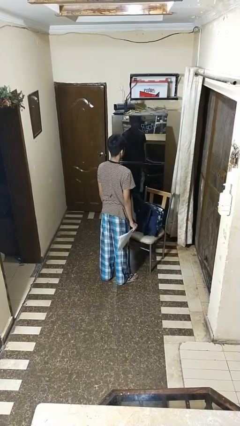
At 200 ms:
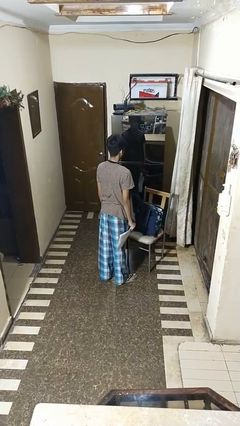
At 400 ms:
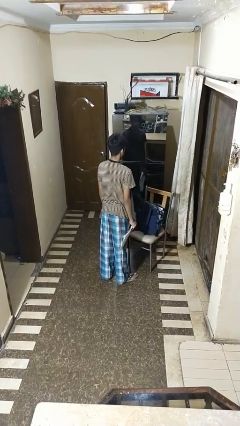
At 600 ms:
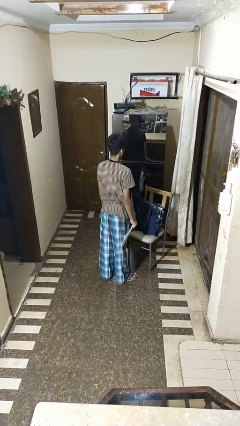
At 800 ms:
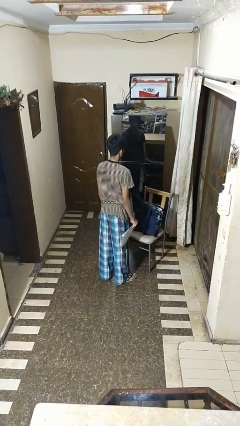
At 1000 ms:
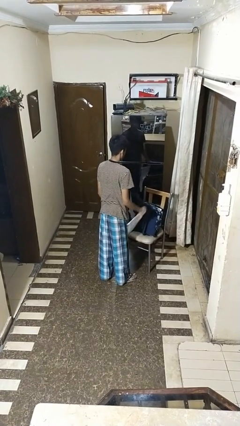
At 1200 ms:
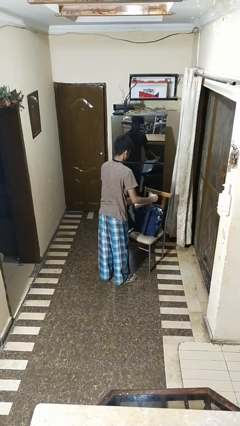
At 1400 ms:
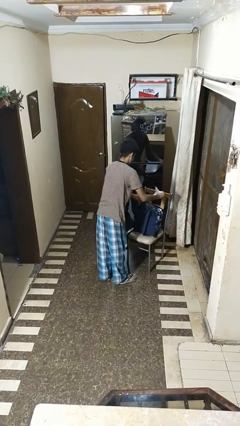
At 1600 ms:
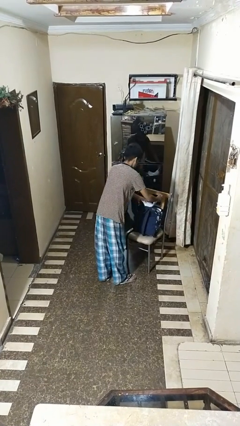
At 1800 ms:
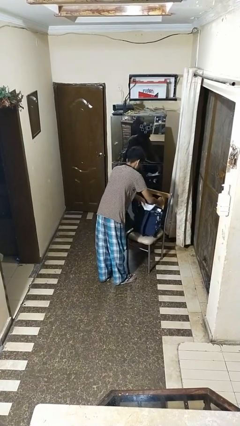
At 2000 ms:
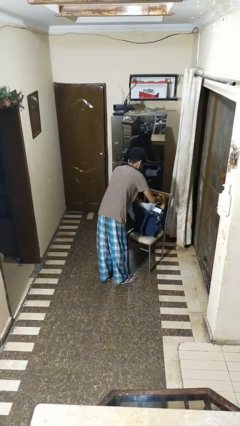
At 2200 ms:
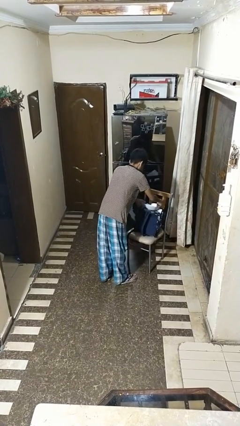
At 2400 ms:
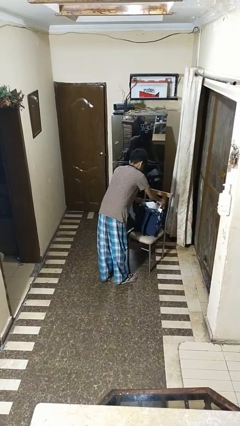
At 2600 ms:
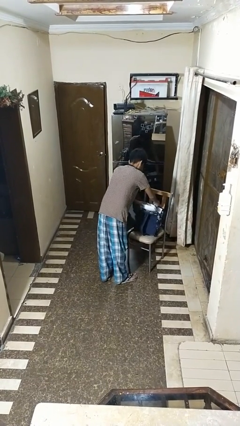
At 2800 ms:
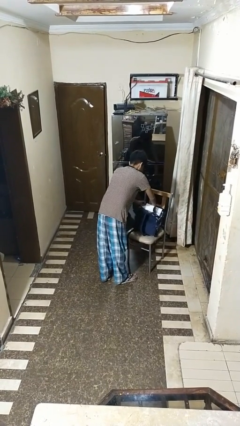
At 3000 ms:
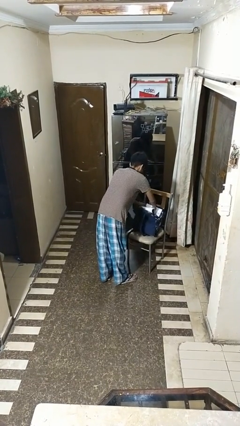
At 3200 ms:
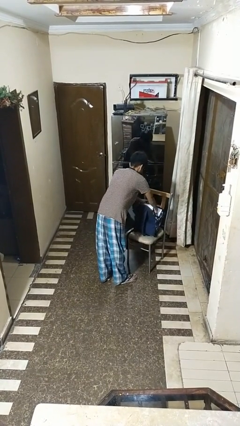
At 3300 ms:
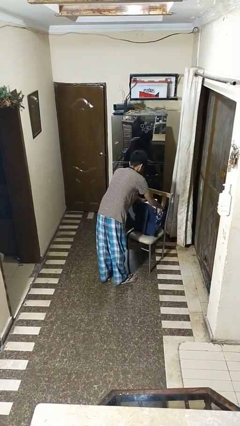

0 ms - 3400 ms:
person puts object into bag

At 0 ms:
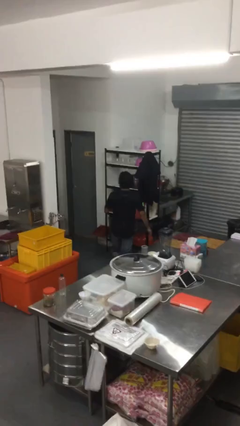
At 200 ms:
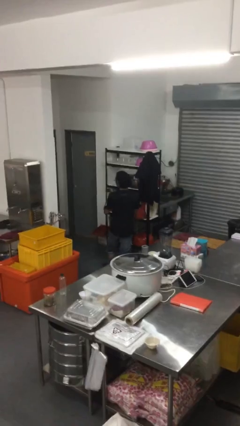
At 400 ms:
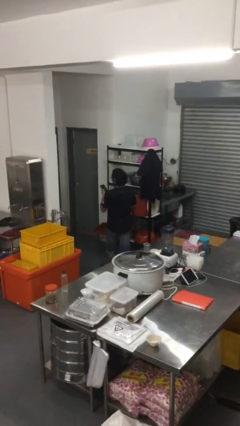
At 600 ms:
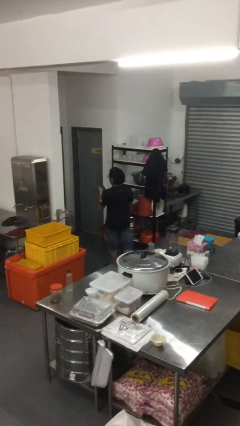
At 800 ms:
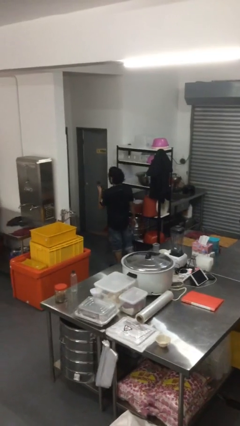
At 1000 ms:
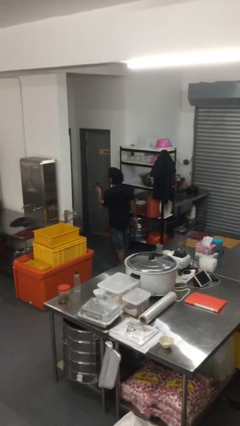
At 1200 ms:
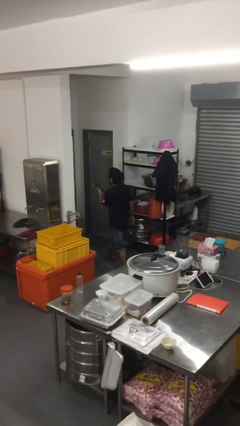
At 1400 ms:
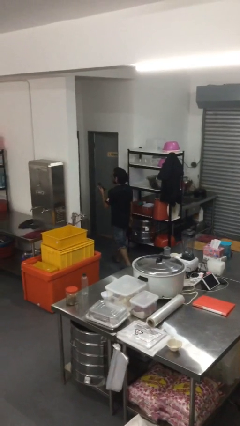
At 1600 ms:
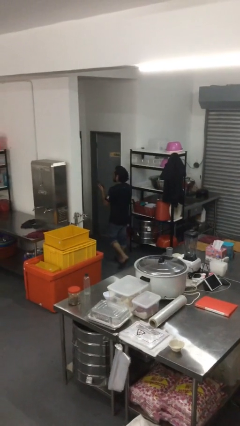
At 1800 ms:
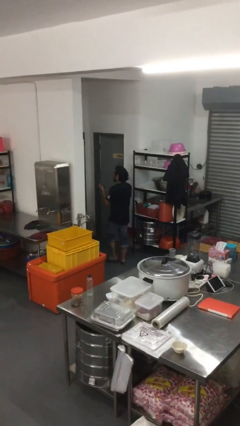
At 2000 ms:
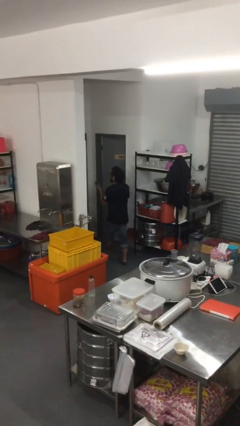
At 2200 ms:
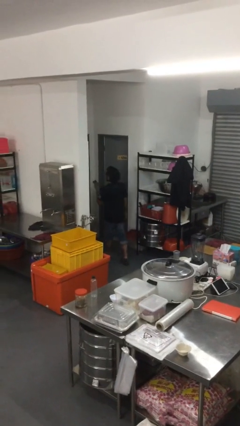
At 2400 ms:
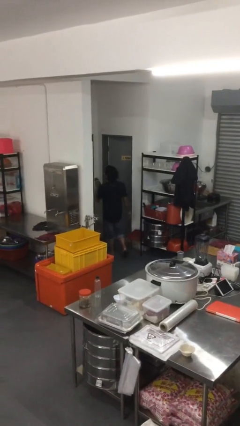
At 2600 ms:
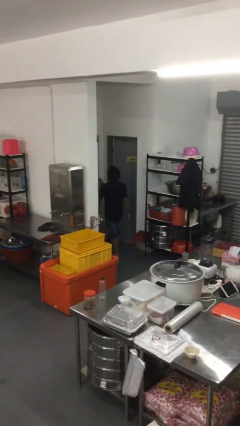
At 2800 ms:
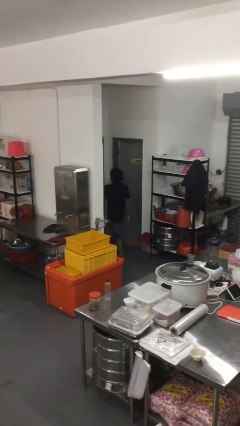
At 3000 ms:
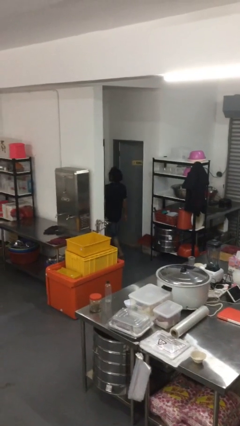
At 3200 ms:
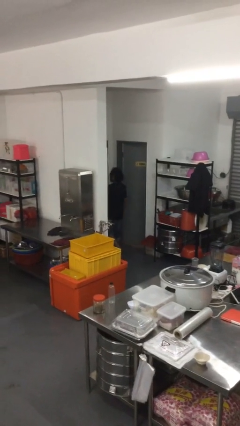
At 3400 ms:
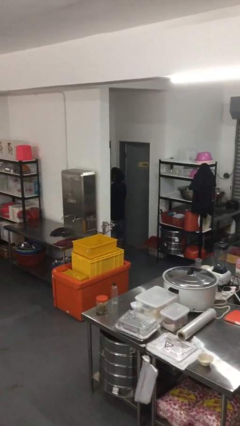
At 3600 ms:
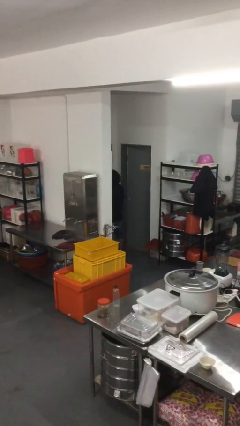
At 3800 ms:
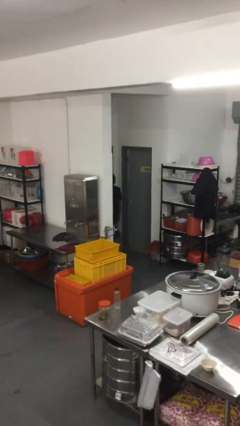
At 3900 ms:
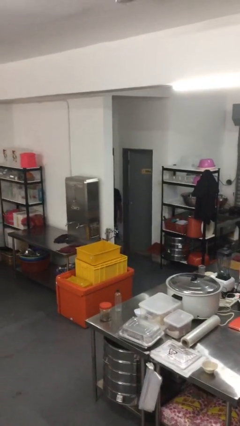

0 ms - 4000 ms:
person exits scene through structure

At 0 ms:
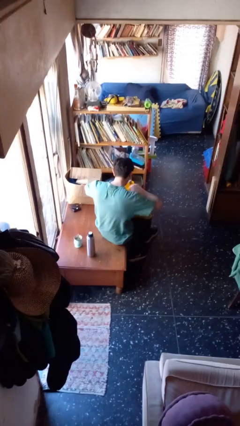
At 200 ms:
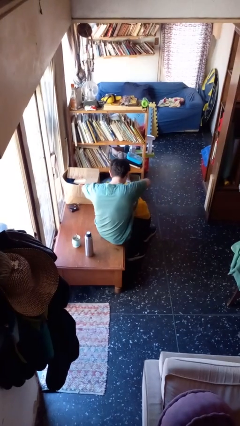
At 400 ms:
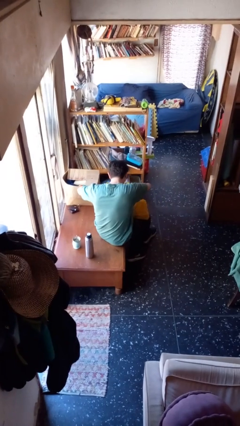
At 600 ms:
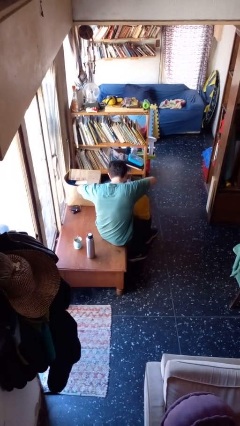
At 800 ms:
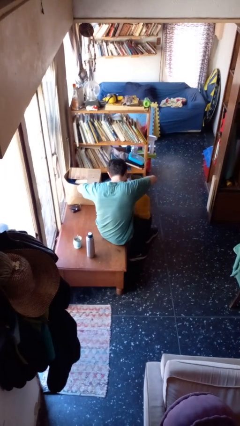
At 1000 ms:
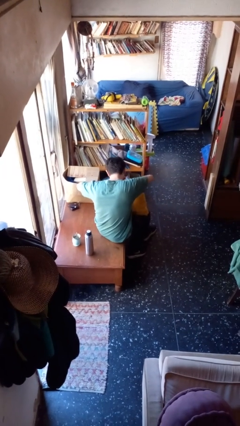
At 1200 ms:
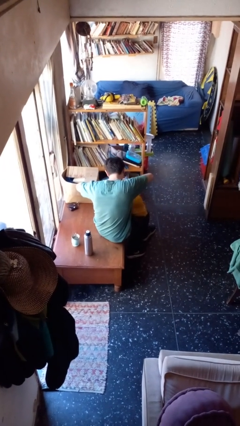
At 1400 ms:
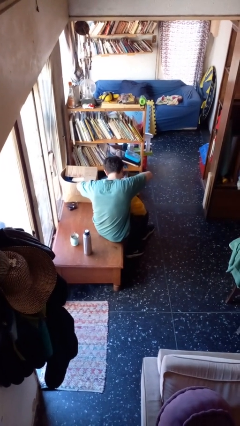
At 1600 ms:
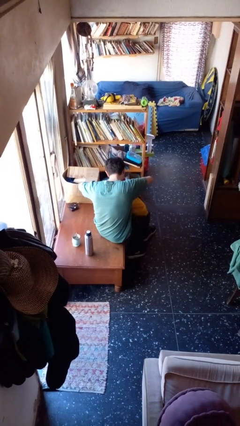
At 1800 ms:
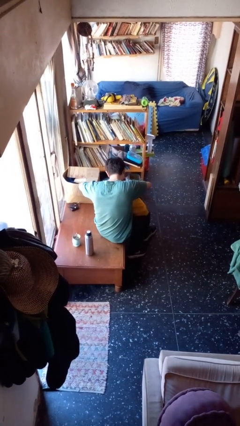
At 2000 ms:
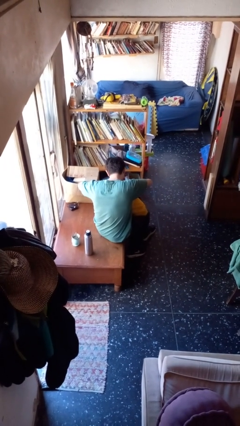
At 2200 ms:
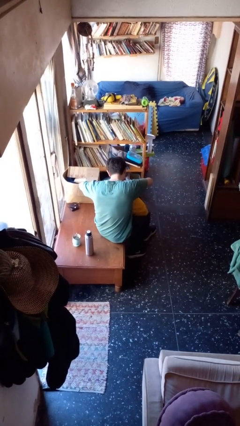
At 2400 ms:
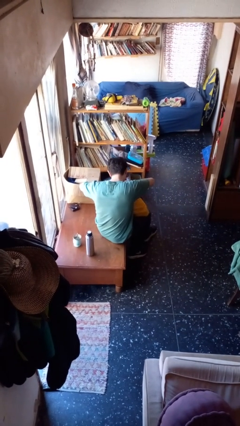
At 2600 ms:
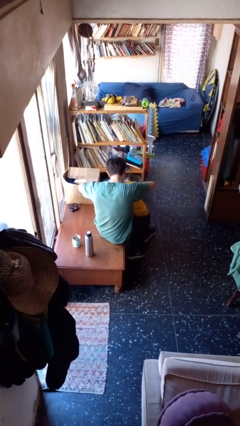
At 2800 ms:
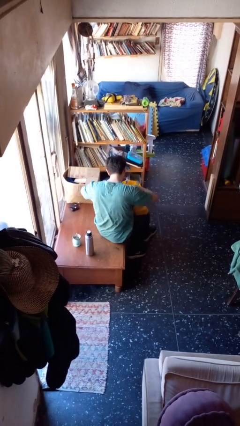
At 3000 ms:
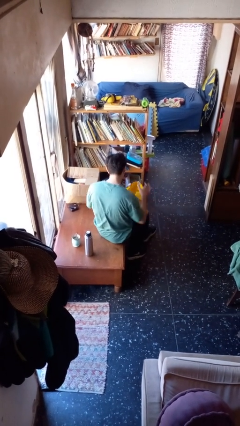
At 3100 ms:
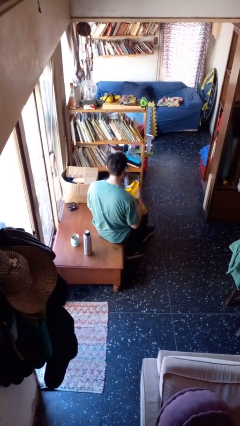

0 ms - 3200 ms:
person searches in bag

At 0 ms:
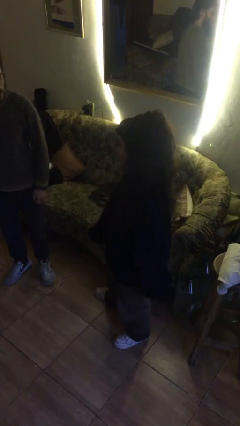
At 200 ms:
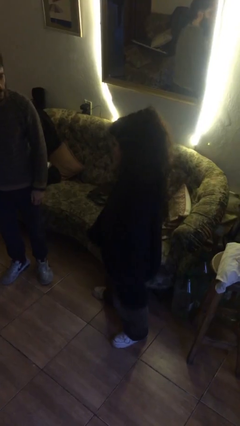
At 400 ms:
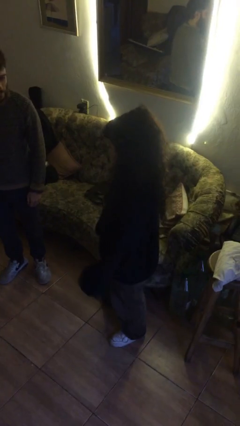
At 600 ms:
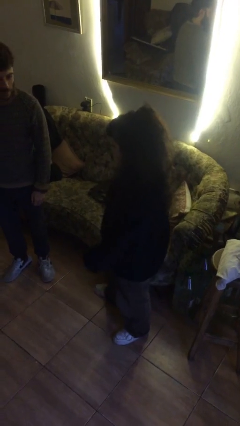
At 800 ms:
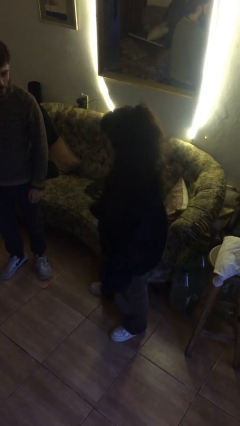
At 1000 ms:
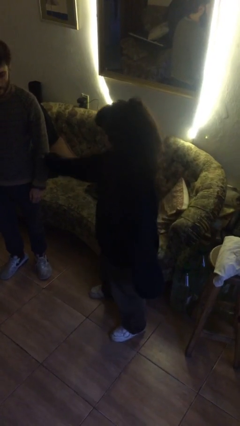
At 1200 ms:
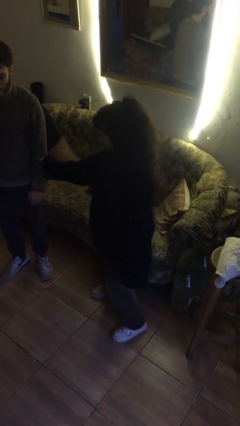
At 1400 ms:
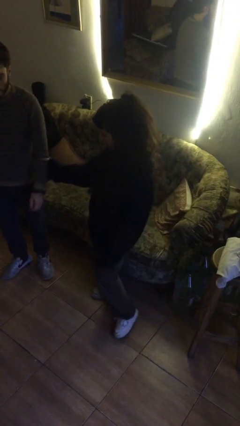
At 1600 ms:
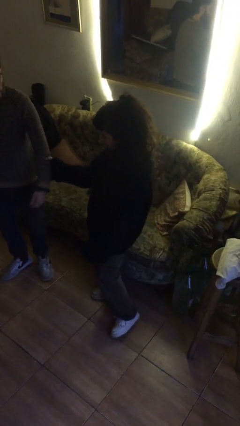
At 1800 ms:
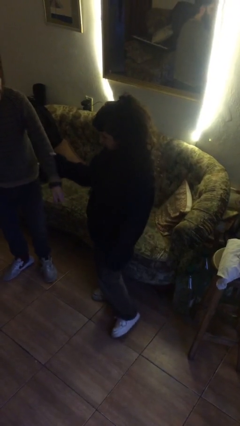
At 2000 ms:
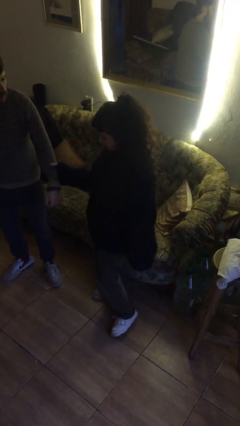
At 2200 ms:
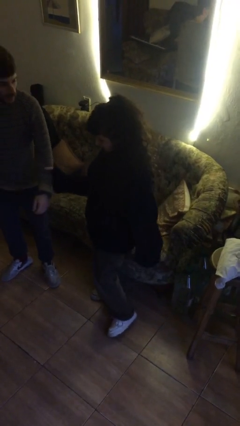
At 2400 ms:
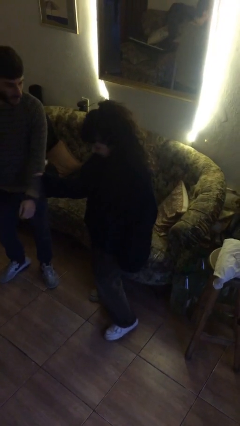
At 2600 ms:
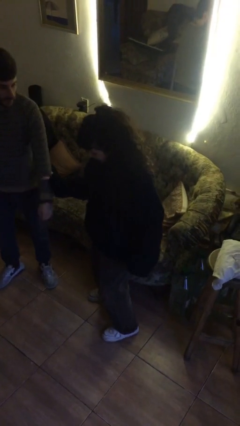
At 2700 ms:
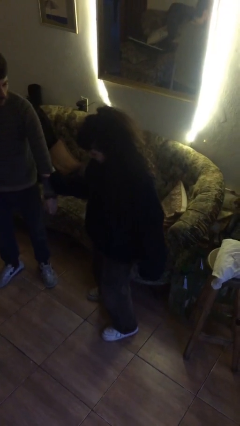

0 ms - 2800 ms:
person grabs person by forearm

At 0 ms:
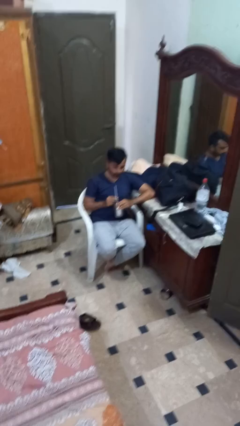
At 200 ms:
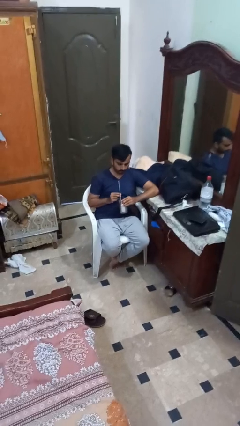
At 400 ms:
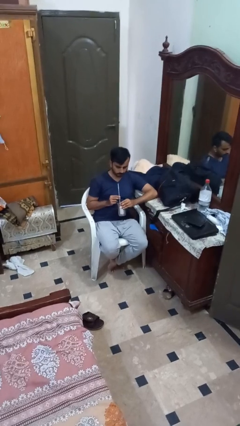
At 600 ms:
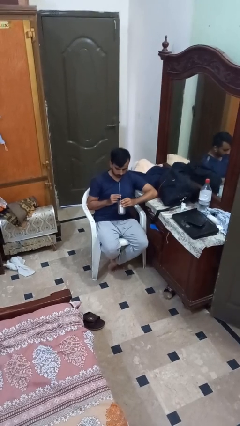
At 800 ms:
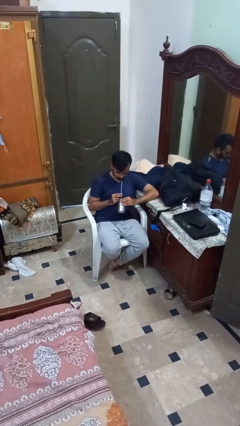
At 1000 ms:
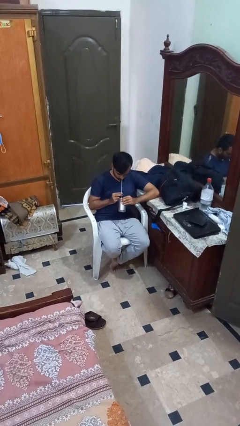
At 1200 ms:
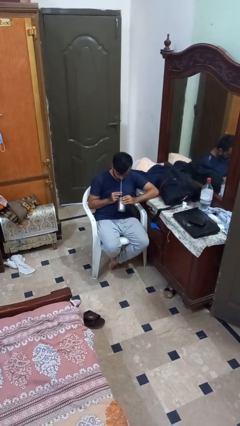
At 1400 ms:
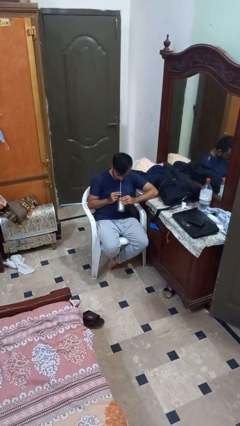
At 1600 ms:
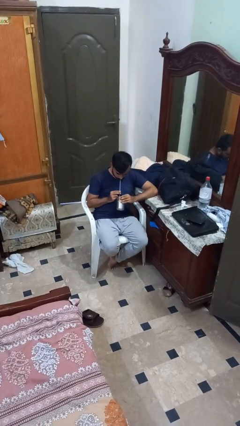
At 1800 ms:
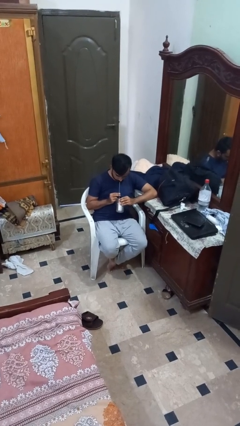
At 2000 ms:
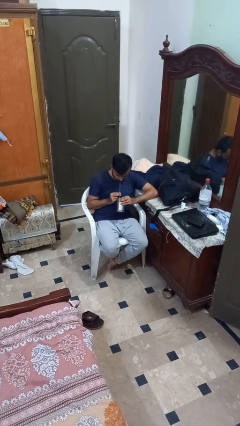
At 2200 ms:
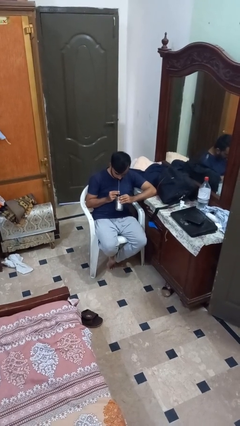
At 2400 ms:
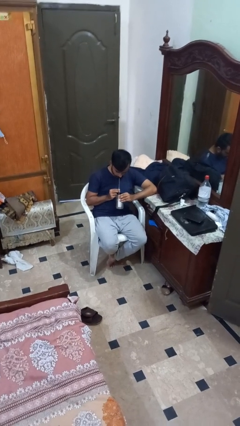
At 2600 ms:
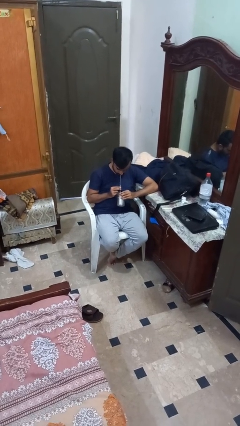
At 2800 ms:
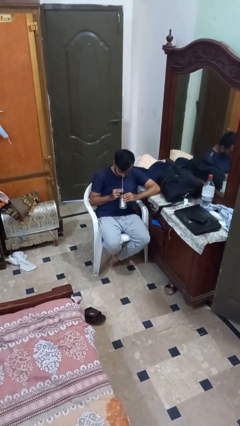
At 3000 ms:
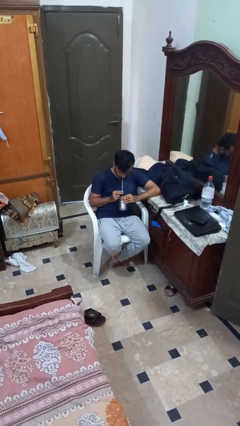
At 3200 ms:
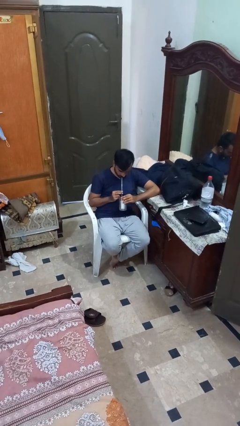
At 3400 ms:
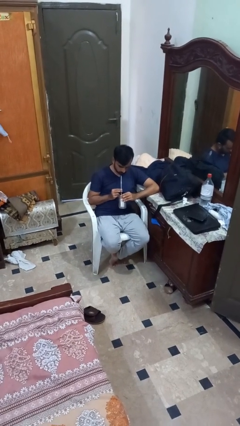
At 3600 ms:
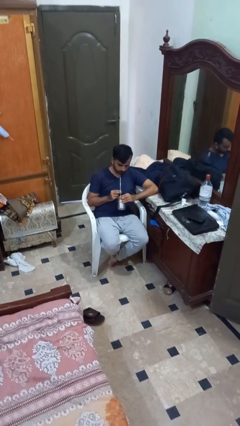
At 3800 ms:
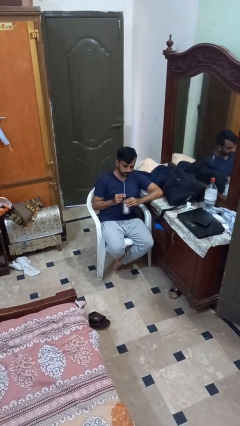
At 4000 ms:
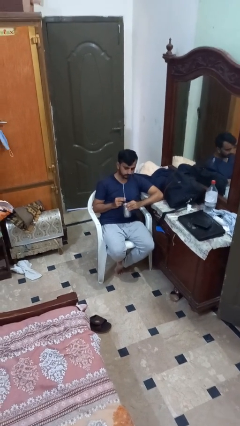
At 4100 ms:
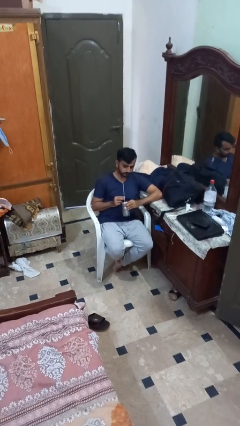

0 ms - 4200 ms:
person drinks from straw
